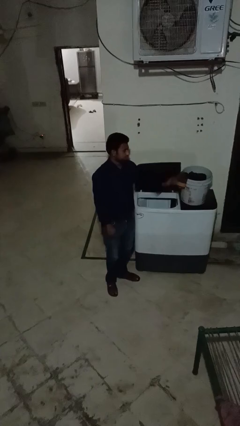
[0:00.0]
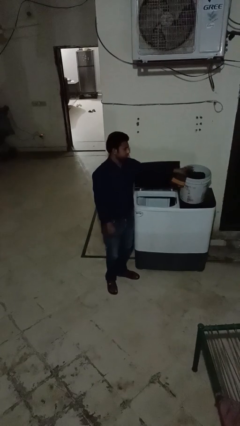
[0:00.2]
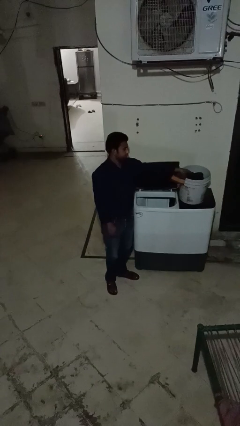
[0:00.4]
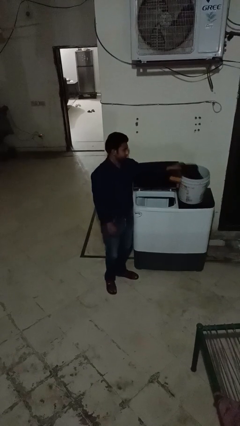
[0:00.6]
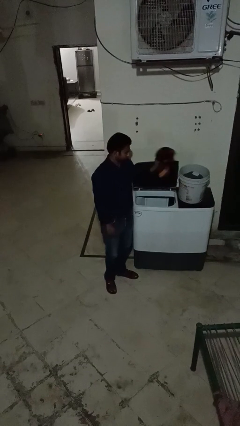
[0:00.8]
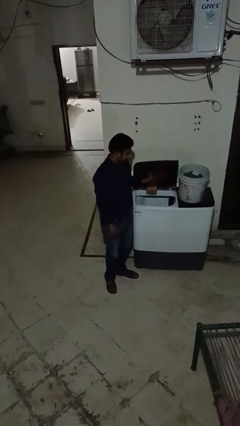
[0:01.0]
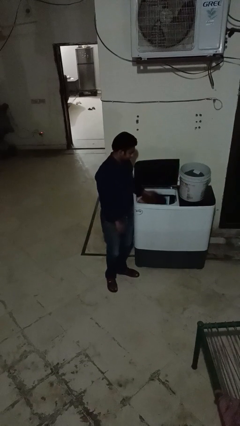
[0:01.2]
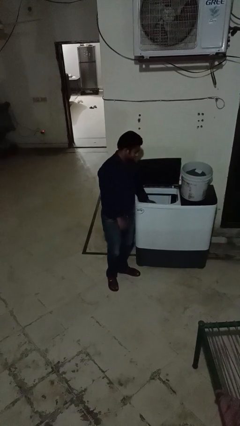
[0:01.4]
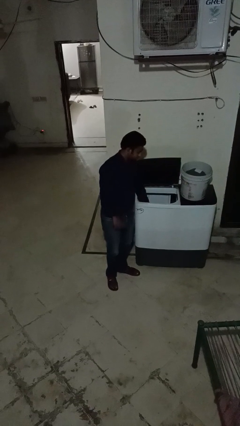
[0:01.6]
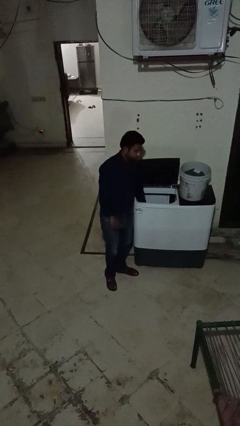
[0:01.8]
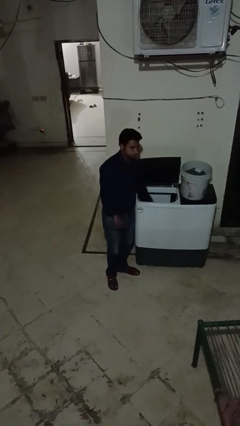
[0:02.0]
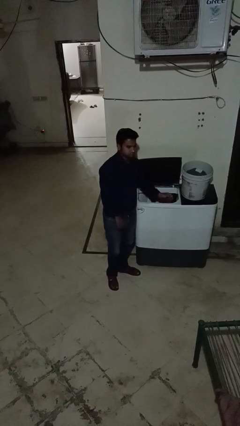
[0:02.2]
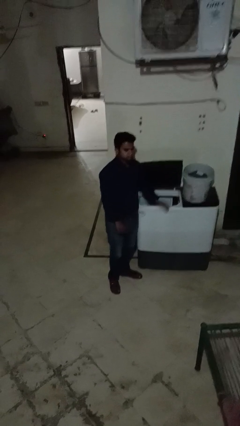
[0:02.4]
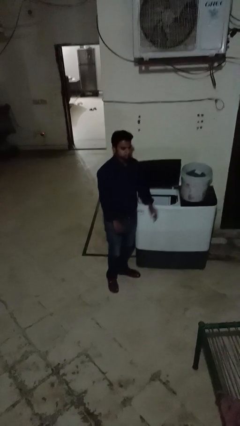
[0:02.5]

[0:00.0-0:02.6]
person loads clotheswasher

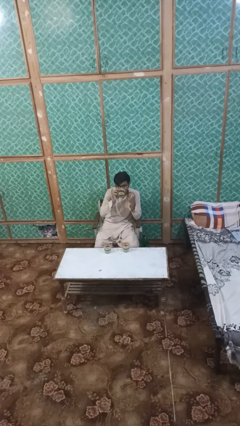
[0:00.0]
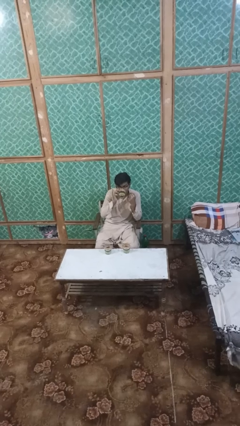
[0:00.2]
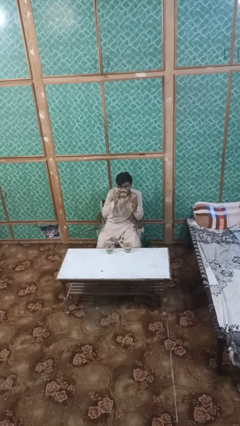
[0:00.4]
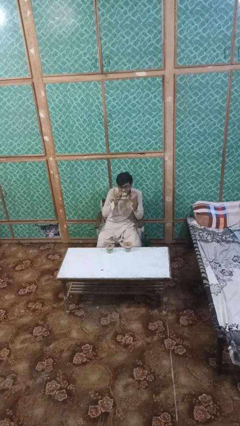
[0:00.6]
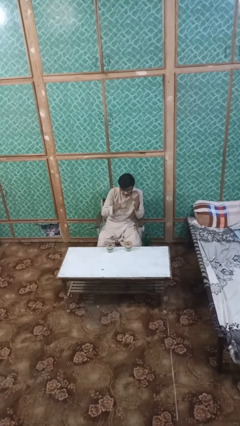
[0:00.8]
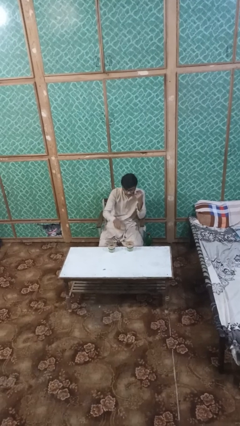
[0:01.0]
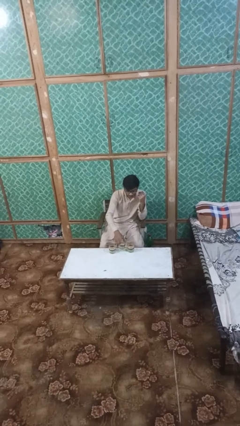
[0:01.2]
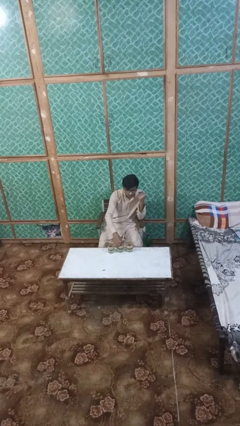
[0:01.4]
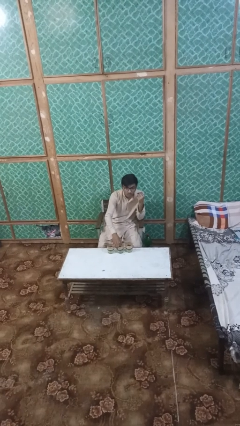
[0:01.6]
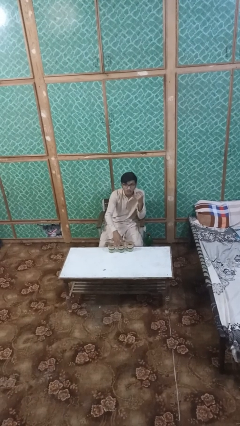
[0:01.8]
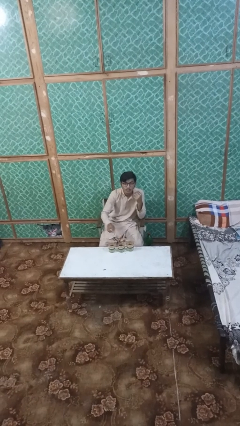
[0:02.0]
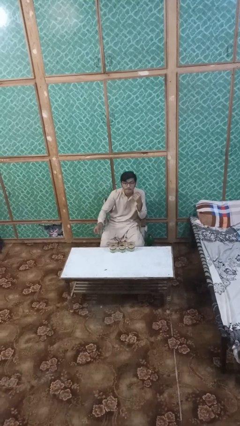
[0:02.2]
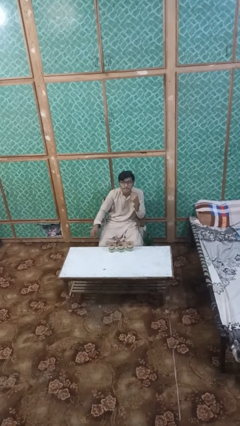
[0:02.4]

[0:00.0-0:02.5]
person puts down object on table

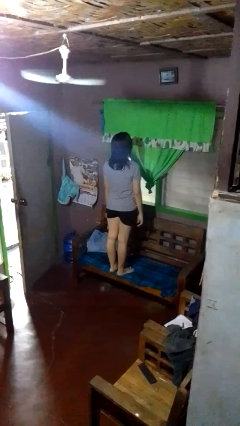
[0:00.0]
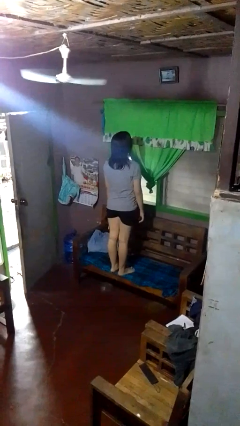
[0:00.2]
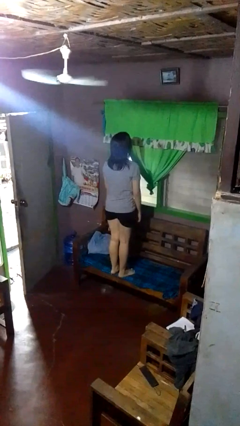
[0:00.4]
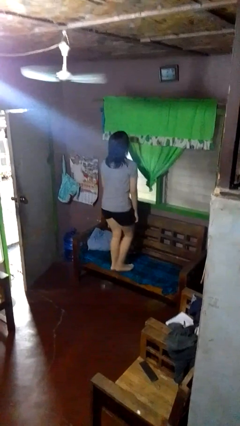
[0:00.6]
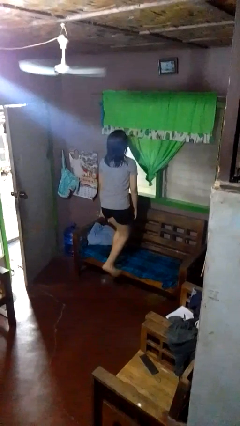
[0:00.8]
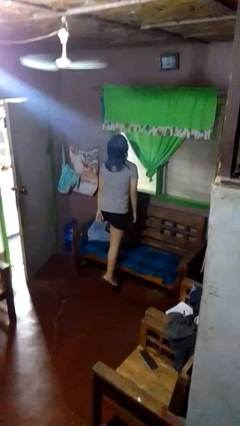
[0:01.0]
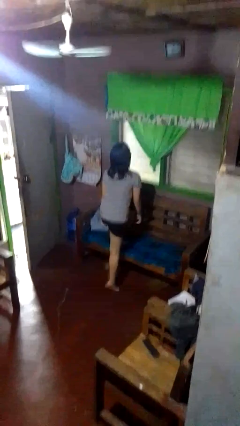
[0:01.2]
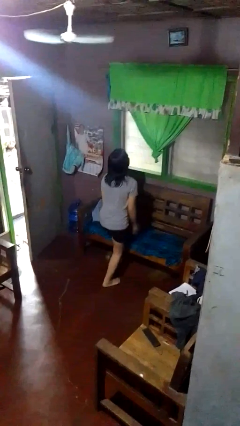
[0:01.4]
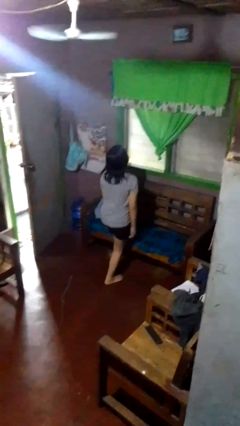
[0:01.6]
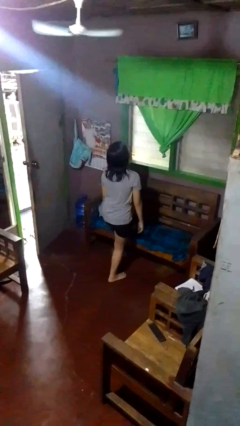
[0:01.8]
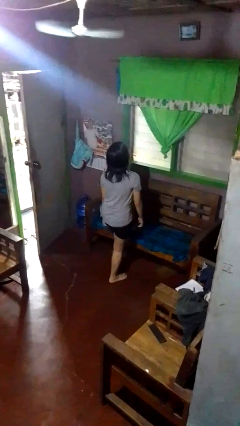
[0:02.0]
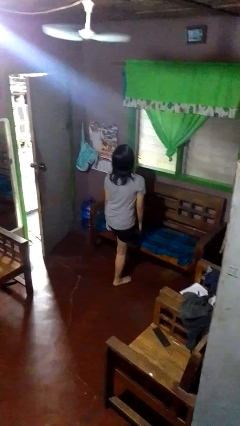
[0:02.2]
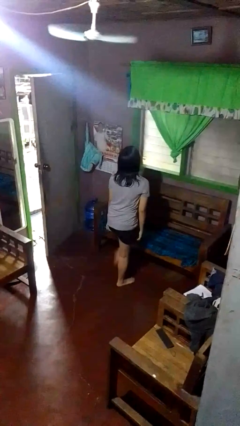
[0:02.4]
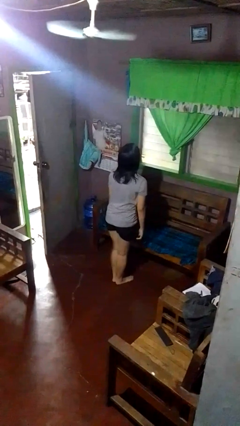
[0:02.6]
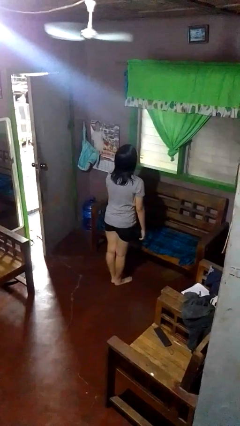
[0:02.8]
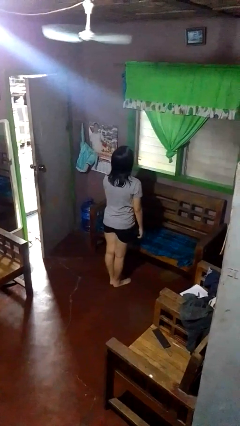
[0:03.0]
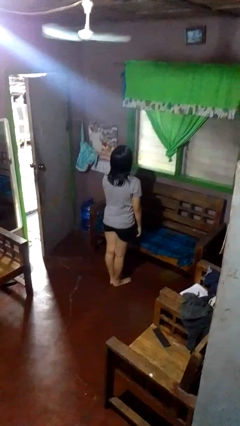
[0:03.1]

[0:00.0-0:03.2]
person climbs off couch

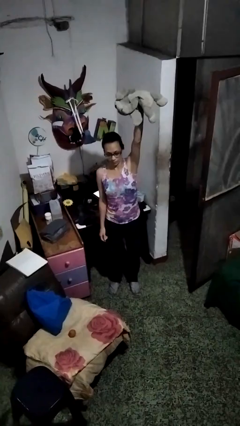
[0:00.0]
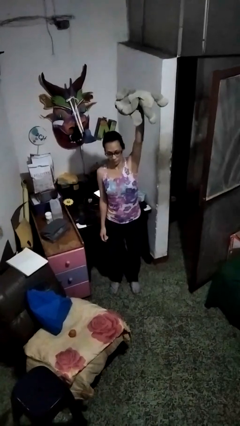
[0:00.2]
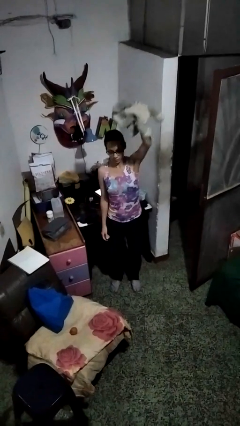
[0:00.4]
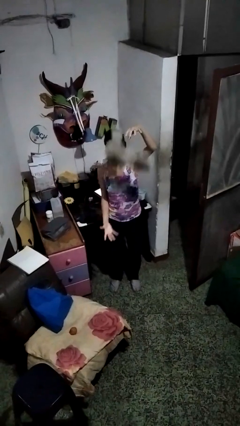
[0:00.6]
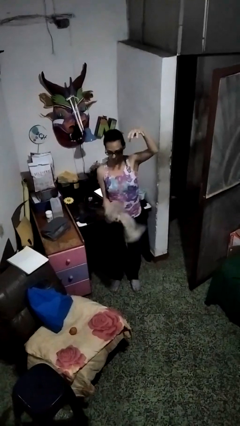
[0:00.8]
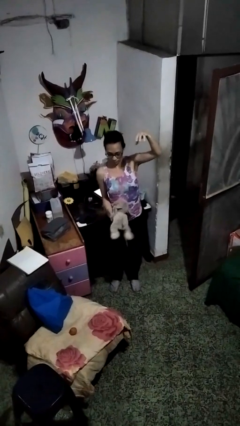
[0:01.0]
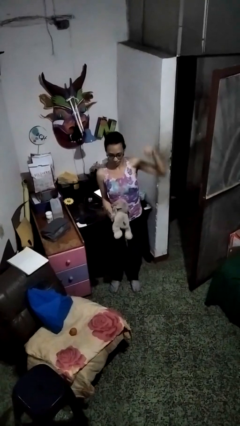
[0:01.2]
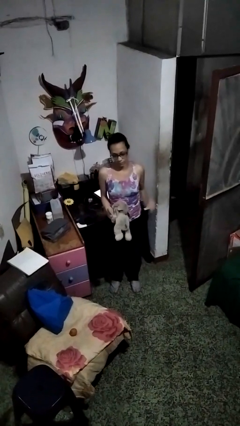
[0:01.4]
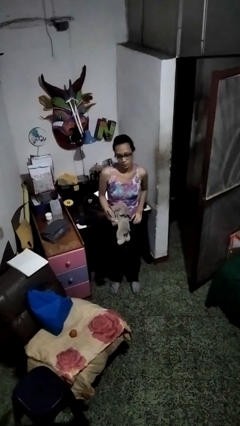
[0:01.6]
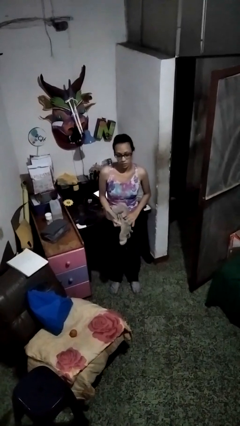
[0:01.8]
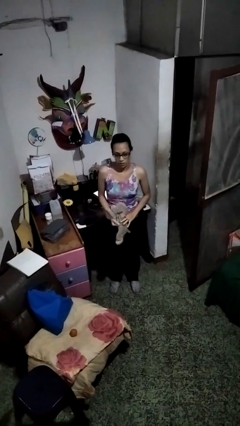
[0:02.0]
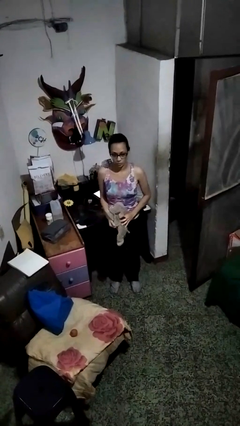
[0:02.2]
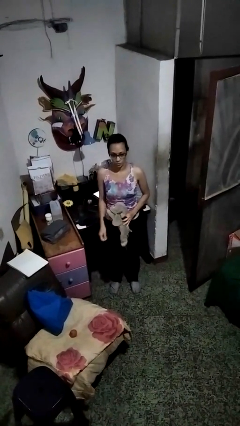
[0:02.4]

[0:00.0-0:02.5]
person catches dropped object

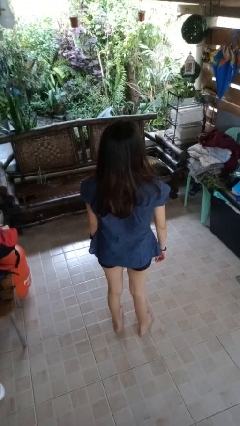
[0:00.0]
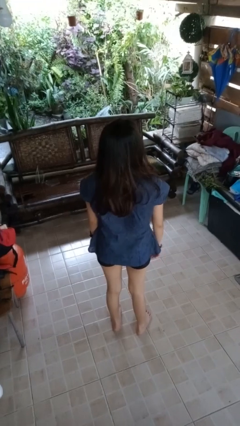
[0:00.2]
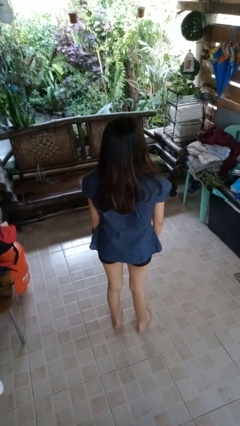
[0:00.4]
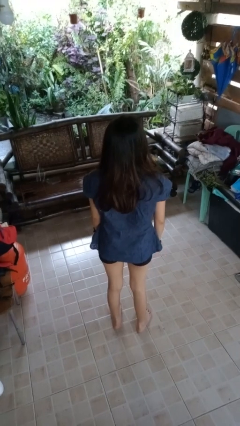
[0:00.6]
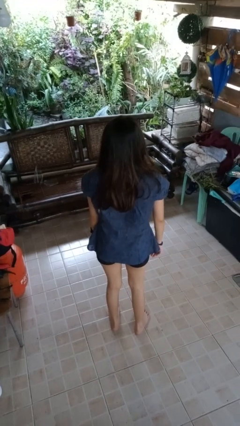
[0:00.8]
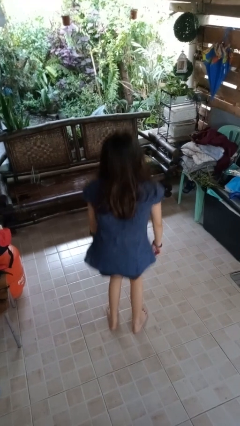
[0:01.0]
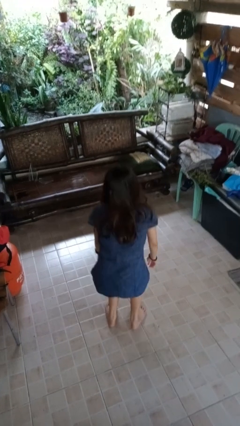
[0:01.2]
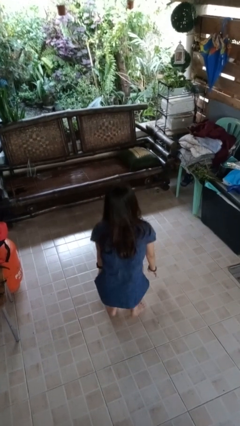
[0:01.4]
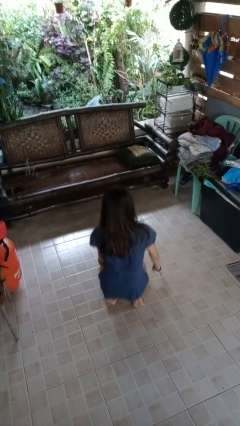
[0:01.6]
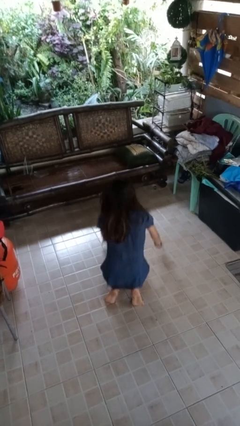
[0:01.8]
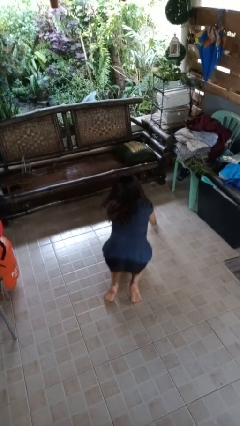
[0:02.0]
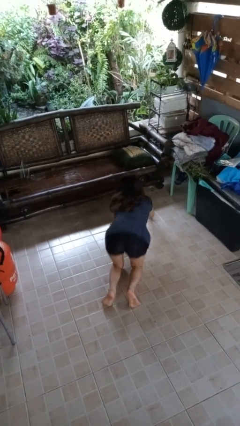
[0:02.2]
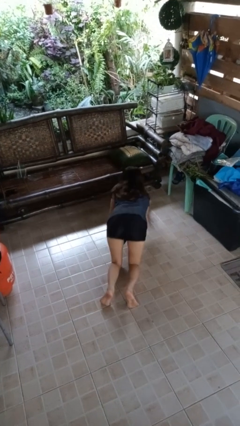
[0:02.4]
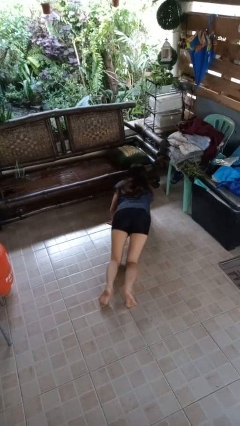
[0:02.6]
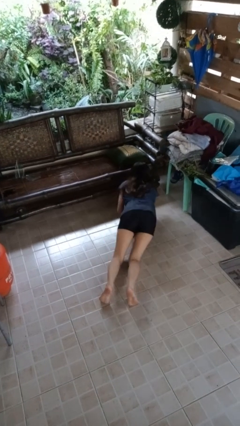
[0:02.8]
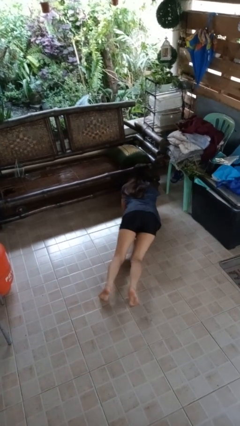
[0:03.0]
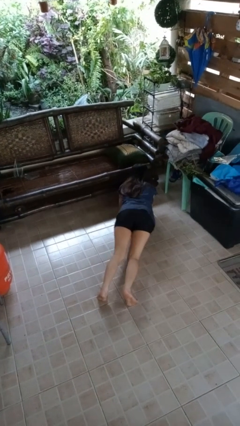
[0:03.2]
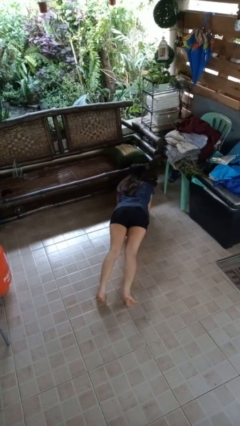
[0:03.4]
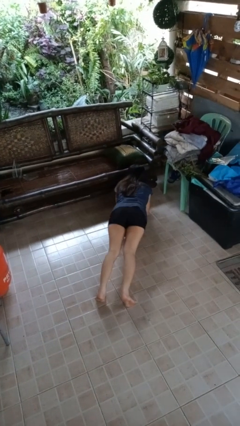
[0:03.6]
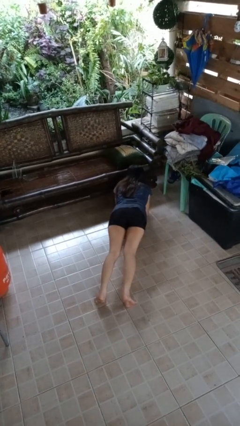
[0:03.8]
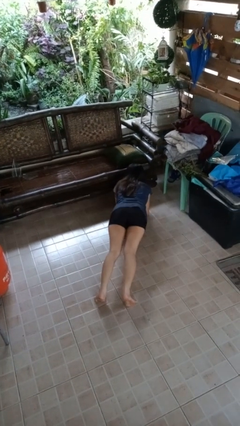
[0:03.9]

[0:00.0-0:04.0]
person exercises with plank

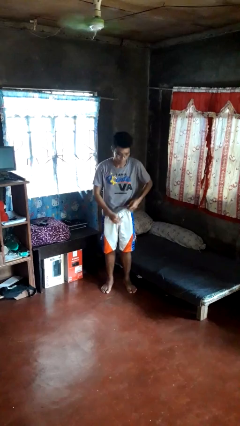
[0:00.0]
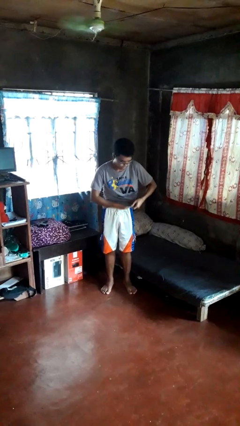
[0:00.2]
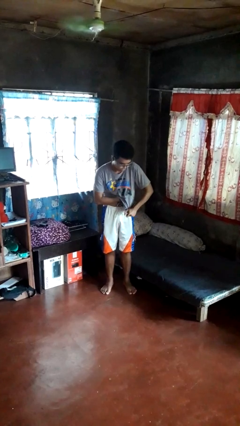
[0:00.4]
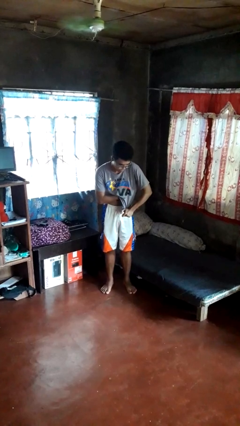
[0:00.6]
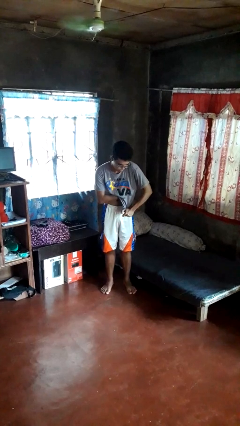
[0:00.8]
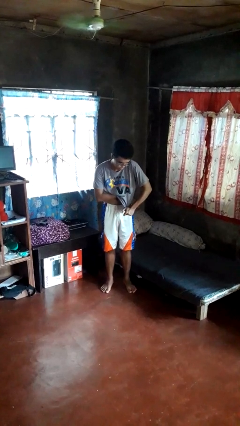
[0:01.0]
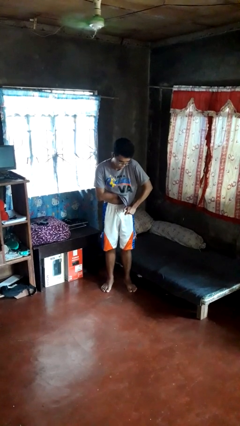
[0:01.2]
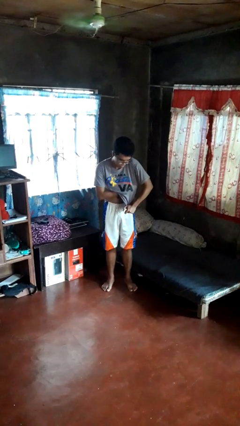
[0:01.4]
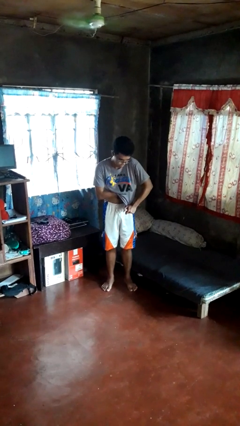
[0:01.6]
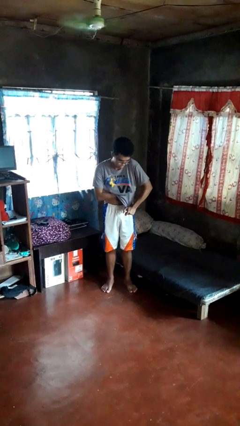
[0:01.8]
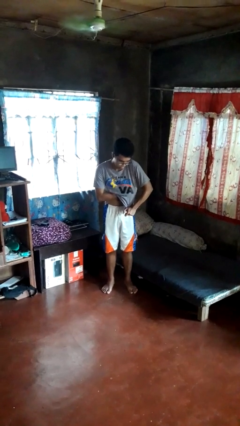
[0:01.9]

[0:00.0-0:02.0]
person applies deodorant

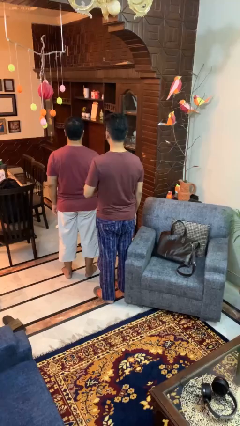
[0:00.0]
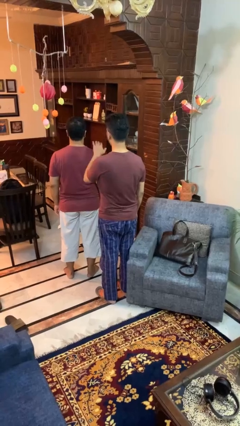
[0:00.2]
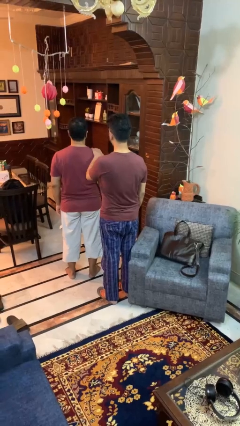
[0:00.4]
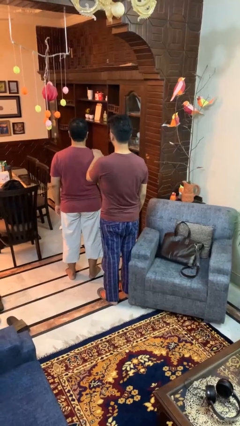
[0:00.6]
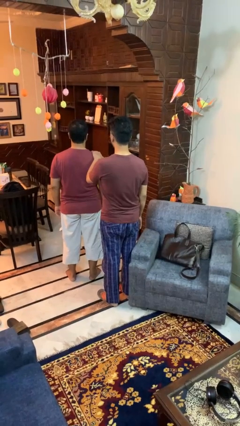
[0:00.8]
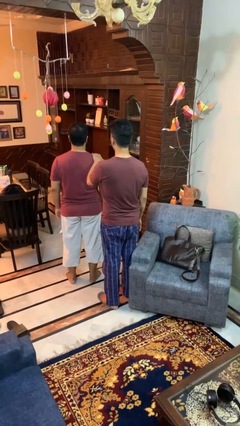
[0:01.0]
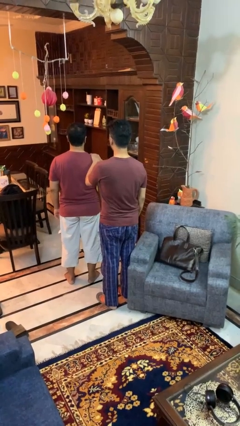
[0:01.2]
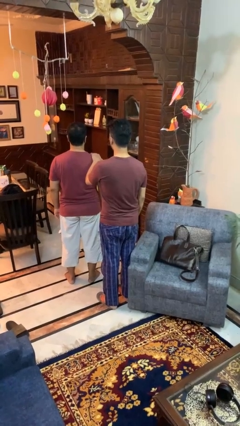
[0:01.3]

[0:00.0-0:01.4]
person grabs person by shoulder
